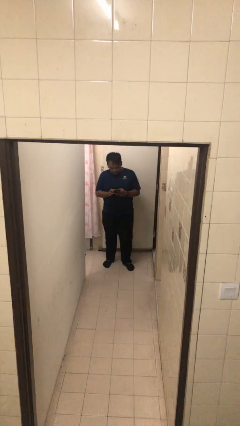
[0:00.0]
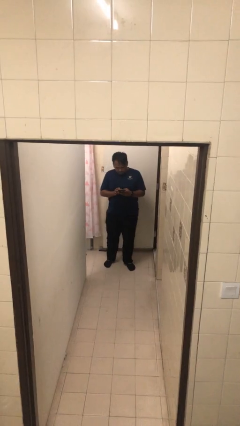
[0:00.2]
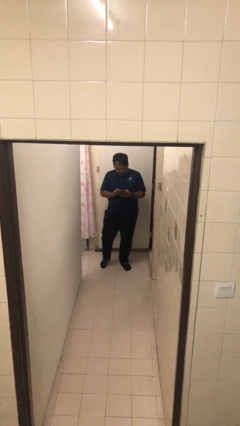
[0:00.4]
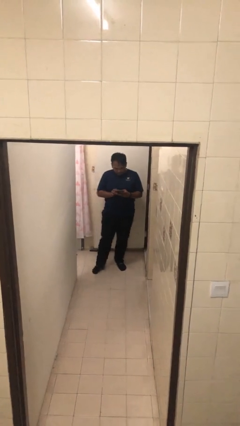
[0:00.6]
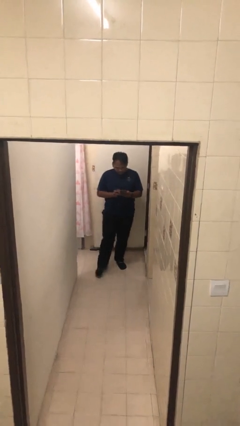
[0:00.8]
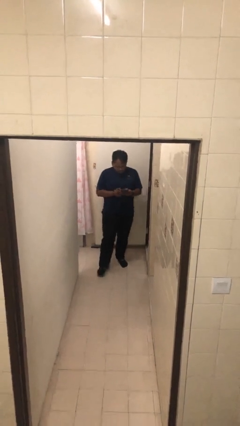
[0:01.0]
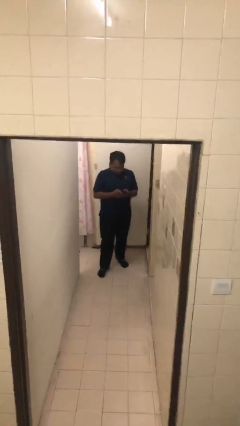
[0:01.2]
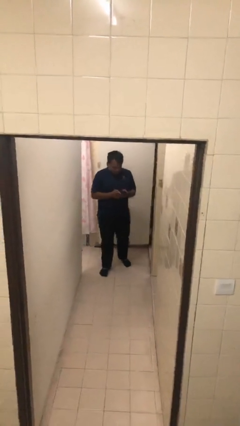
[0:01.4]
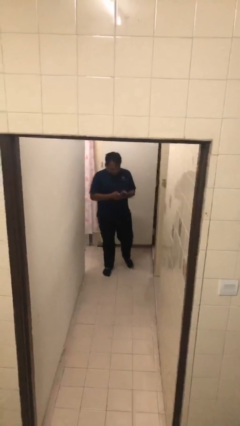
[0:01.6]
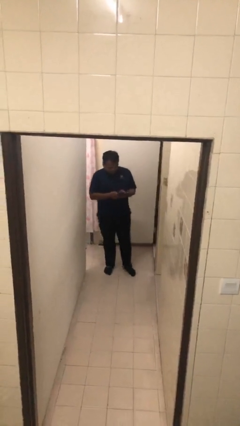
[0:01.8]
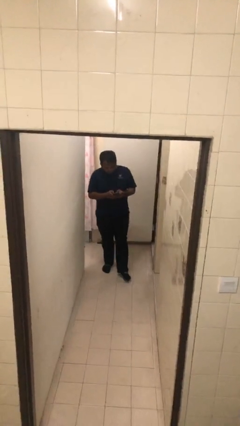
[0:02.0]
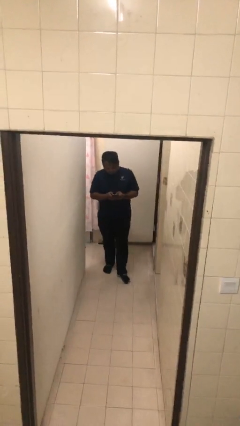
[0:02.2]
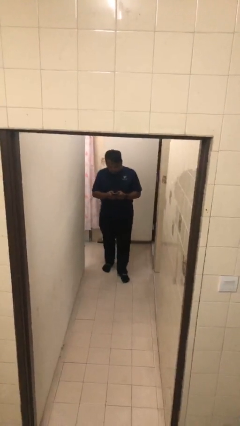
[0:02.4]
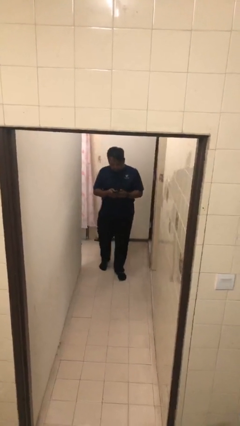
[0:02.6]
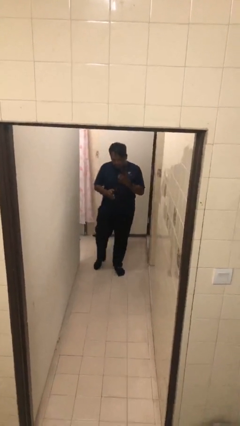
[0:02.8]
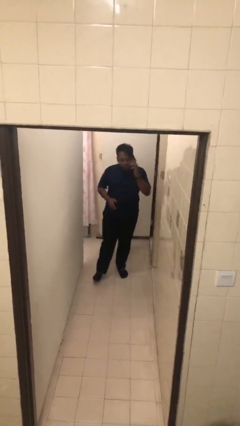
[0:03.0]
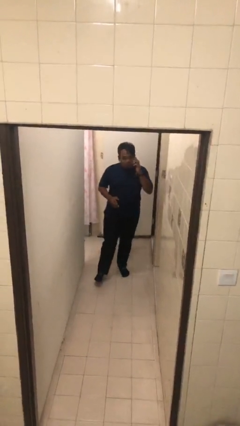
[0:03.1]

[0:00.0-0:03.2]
person texts on phone

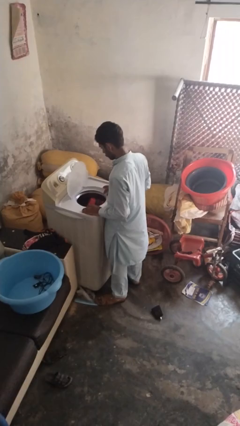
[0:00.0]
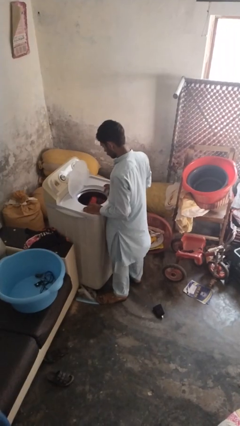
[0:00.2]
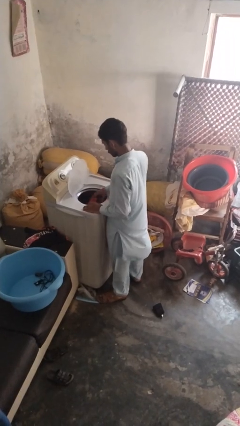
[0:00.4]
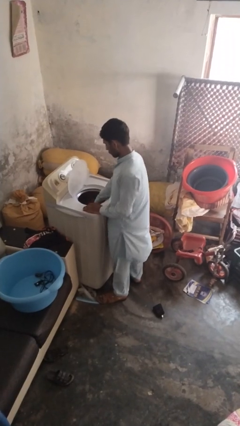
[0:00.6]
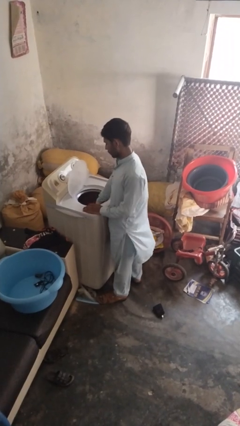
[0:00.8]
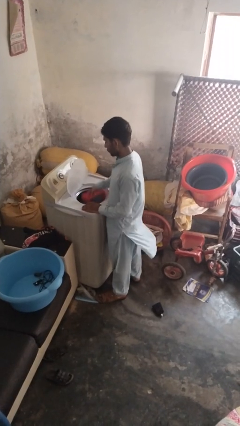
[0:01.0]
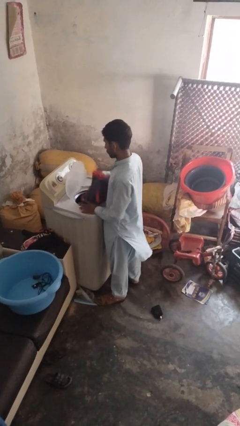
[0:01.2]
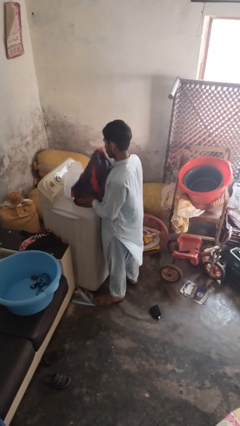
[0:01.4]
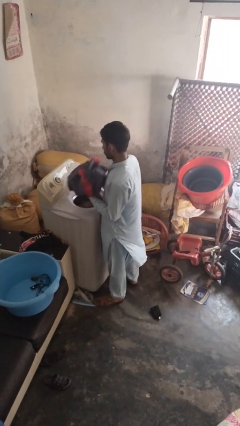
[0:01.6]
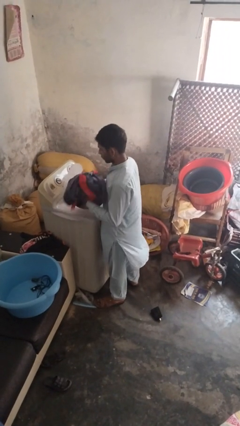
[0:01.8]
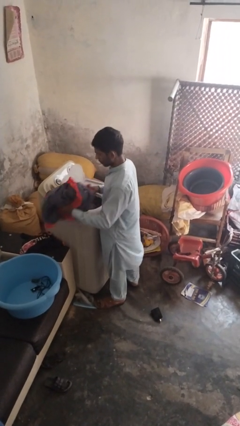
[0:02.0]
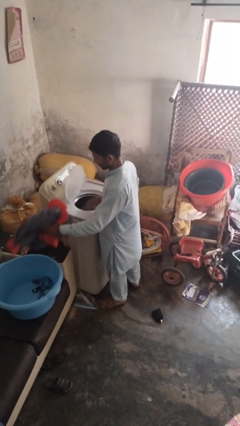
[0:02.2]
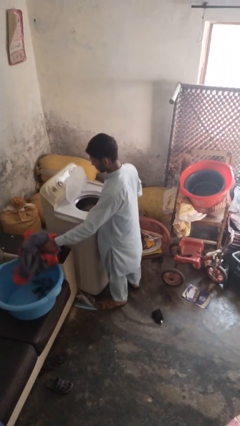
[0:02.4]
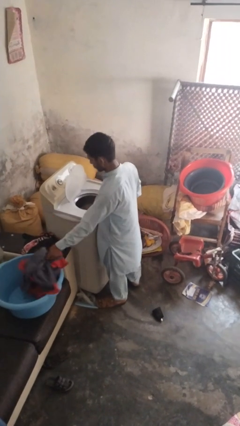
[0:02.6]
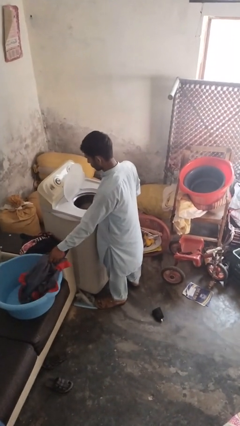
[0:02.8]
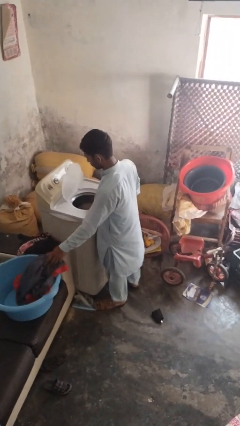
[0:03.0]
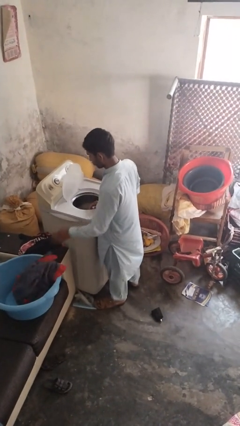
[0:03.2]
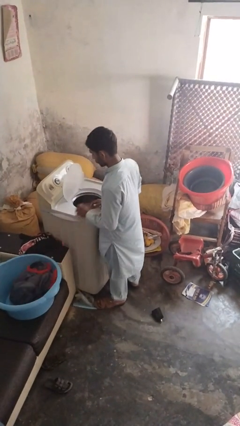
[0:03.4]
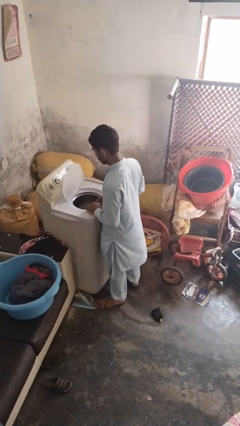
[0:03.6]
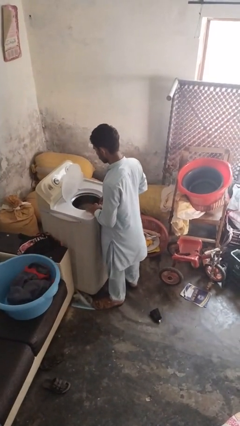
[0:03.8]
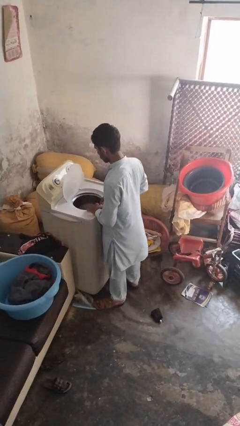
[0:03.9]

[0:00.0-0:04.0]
person loads clotheswasher

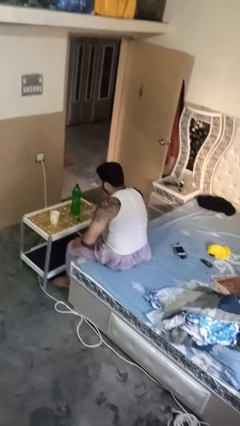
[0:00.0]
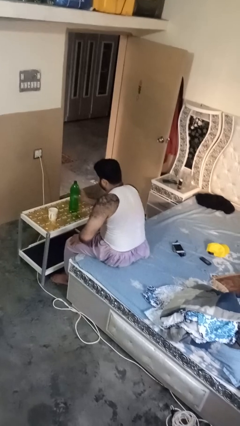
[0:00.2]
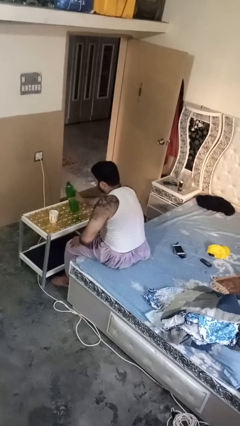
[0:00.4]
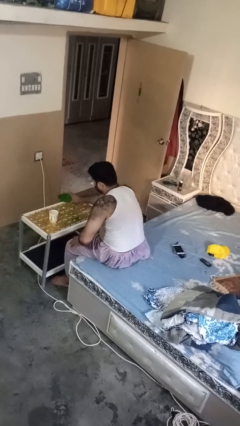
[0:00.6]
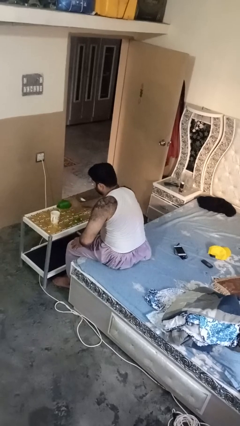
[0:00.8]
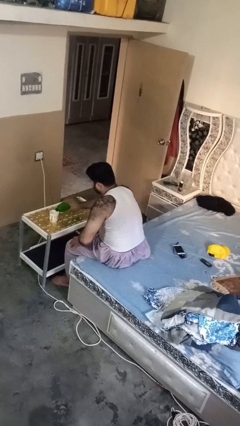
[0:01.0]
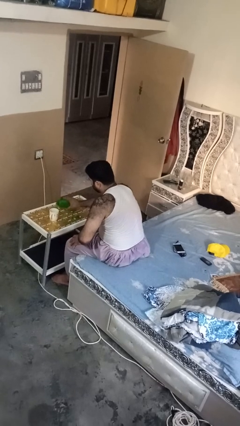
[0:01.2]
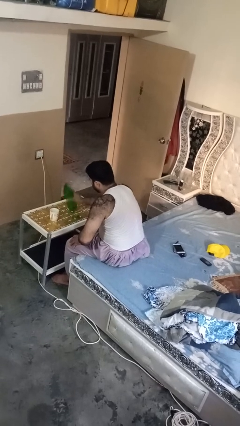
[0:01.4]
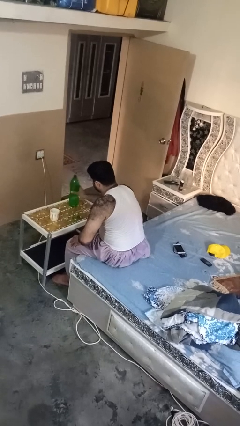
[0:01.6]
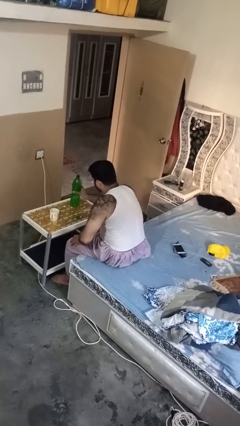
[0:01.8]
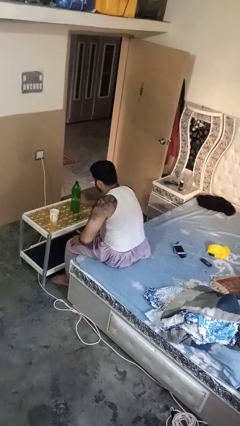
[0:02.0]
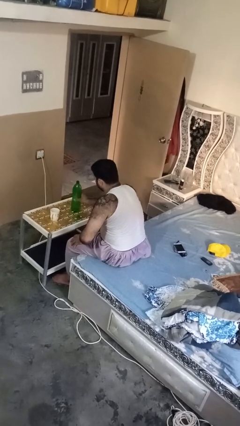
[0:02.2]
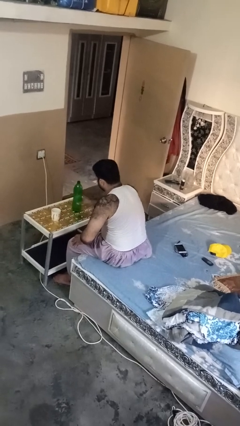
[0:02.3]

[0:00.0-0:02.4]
person pours liquid into cup

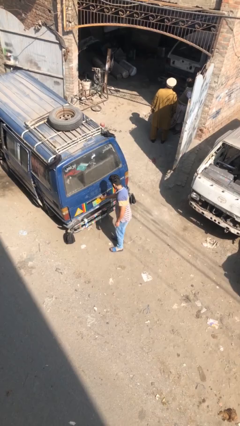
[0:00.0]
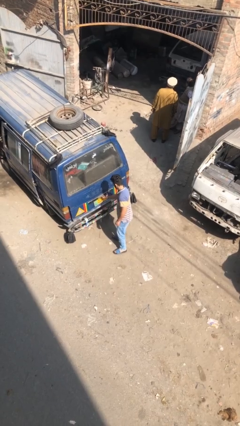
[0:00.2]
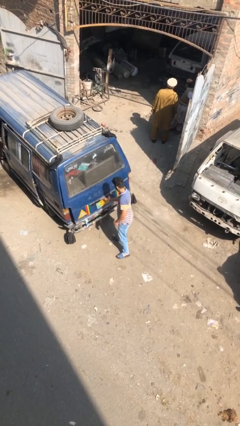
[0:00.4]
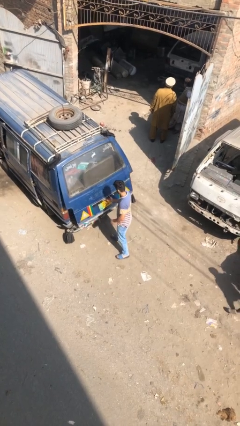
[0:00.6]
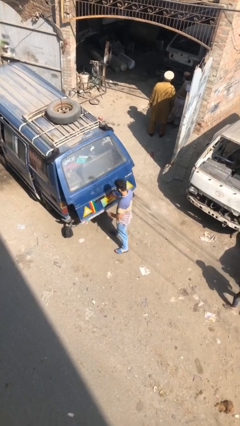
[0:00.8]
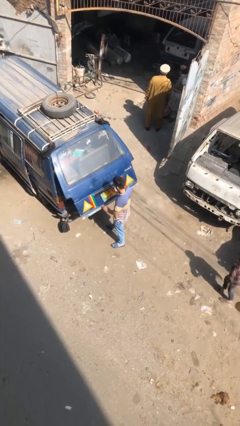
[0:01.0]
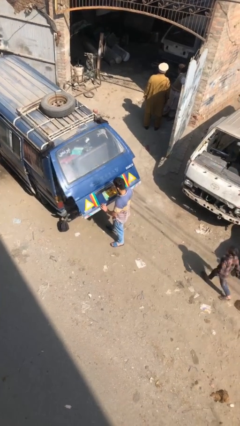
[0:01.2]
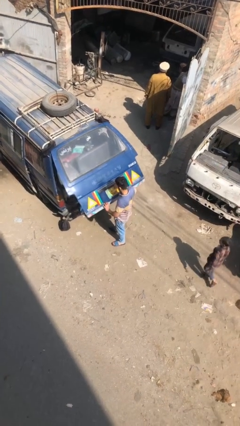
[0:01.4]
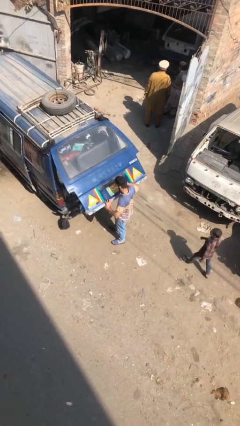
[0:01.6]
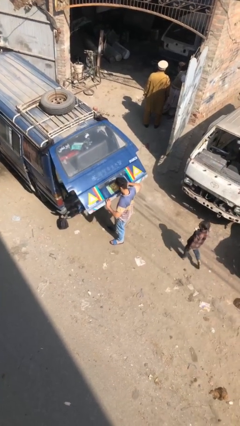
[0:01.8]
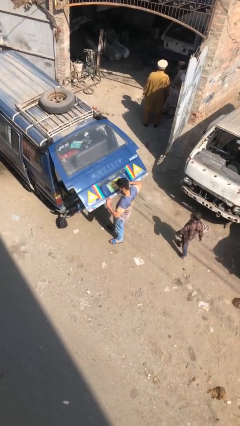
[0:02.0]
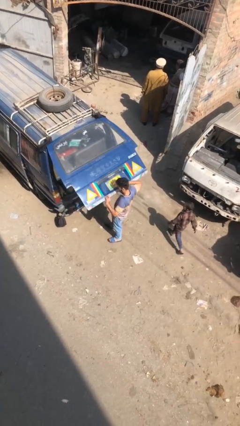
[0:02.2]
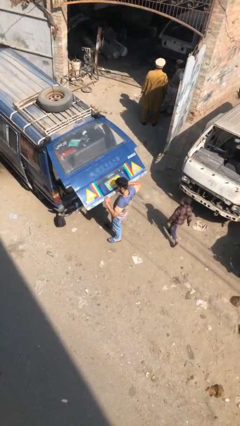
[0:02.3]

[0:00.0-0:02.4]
person opens car trunk

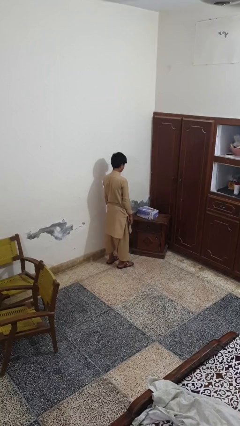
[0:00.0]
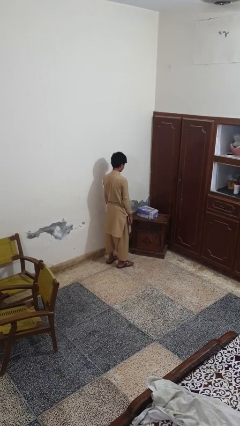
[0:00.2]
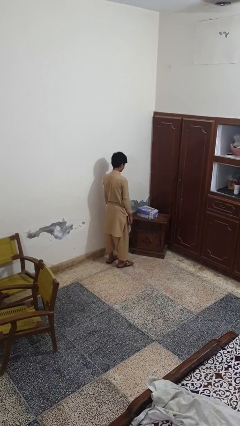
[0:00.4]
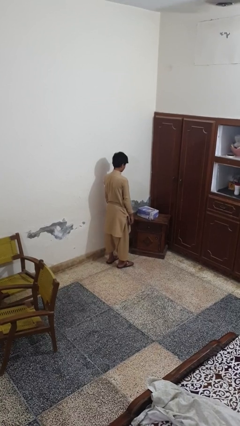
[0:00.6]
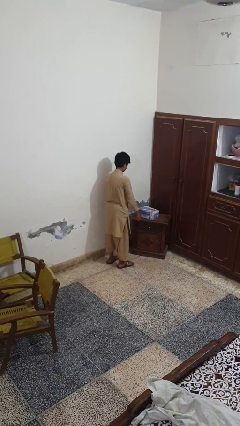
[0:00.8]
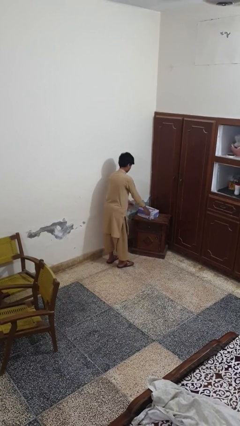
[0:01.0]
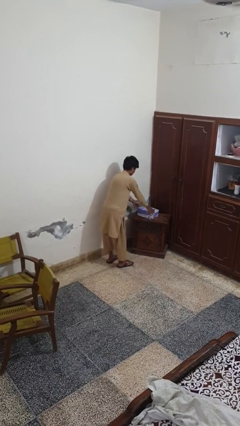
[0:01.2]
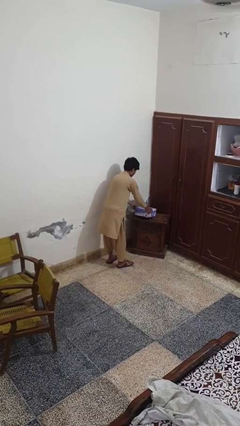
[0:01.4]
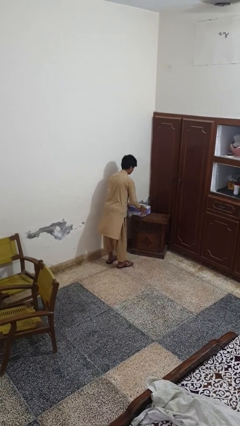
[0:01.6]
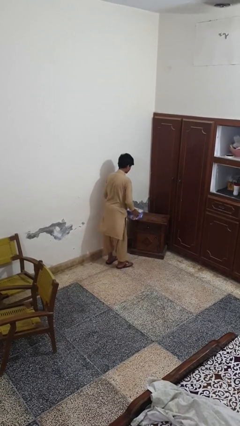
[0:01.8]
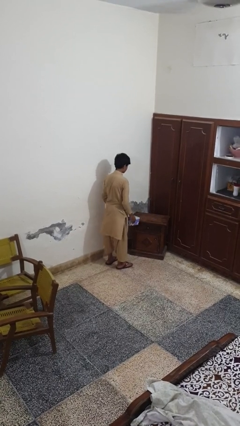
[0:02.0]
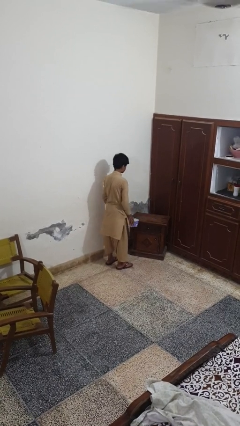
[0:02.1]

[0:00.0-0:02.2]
person picks up object from table

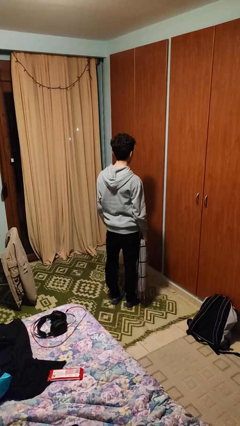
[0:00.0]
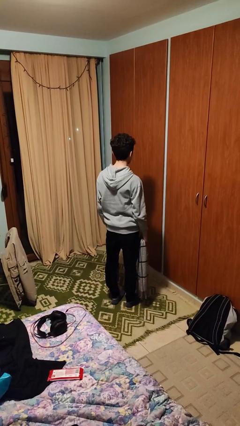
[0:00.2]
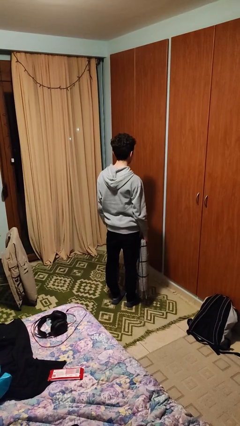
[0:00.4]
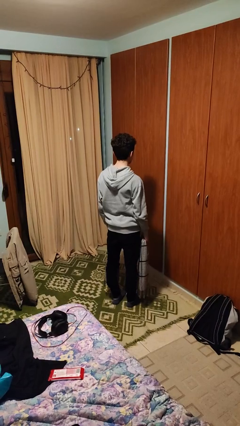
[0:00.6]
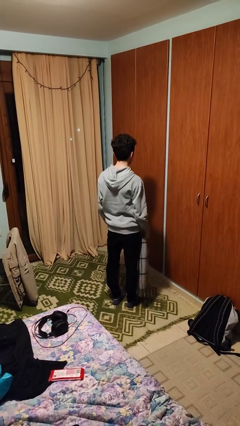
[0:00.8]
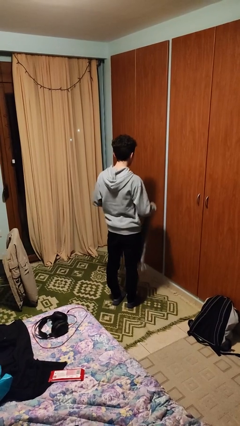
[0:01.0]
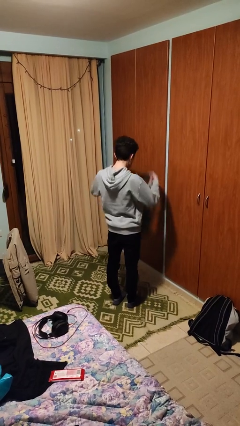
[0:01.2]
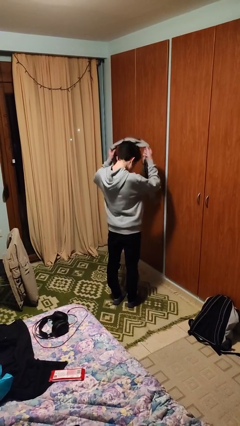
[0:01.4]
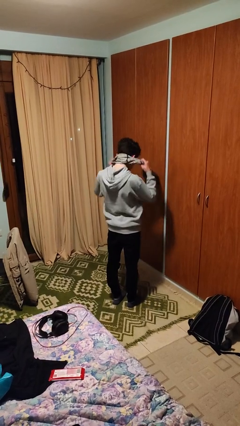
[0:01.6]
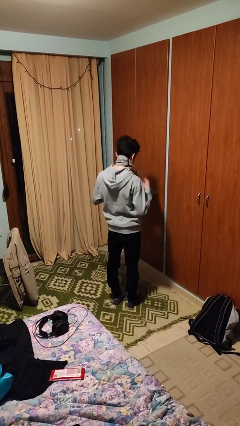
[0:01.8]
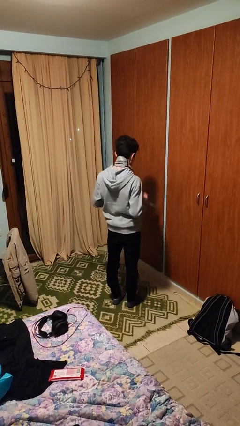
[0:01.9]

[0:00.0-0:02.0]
person puts on scarf

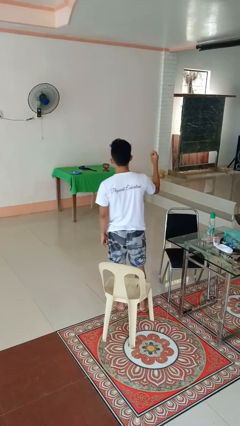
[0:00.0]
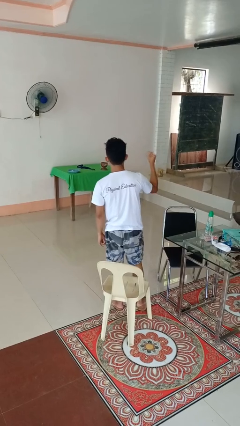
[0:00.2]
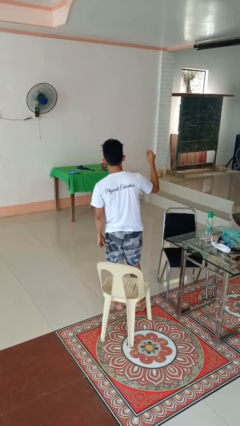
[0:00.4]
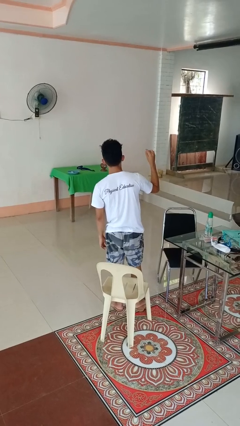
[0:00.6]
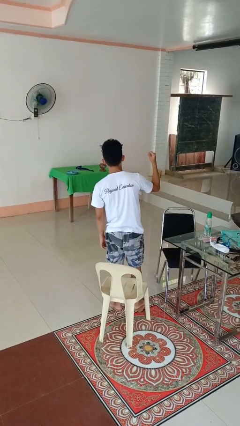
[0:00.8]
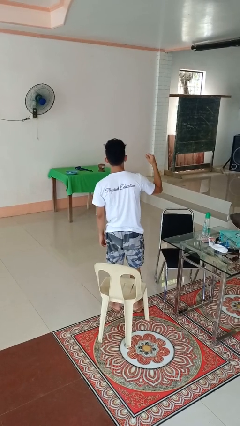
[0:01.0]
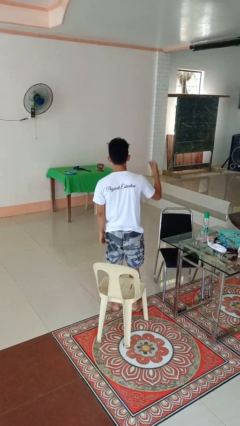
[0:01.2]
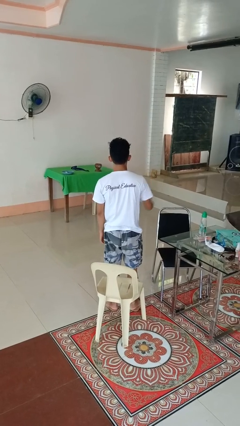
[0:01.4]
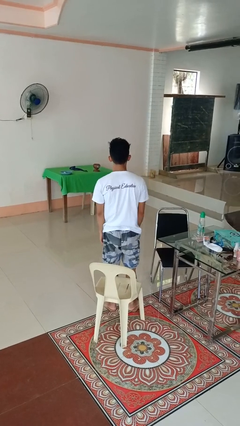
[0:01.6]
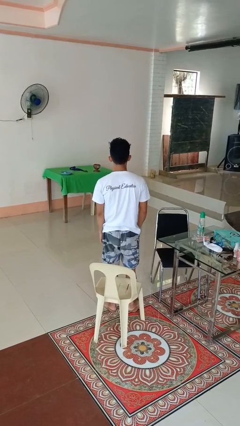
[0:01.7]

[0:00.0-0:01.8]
person snaps fingers
